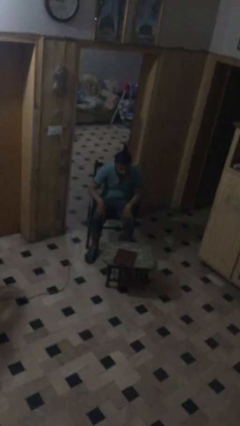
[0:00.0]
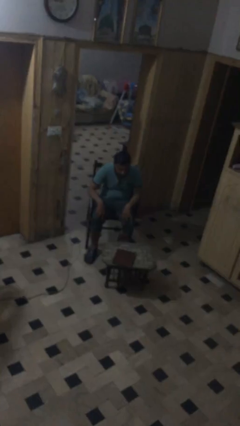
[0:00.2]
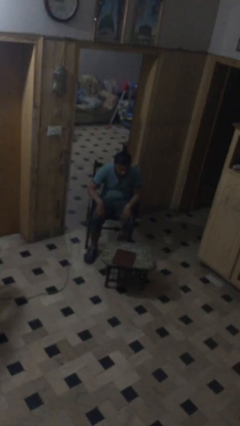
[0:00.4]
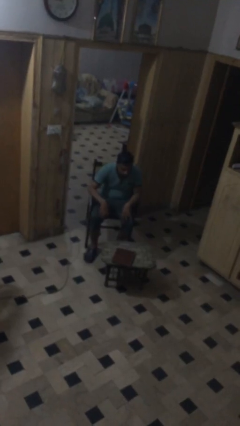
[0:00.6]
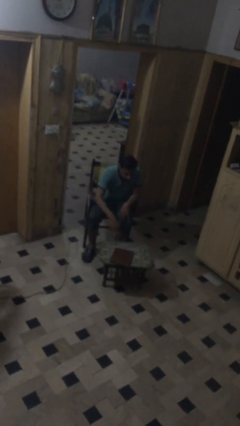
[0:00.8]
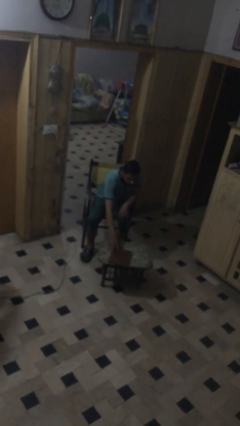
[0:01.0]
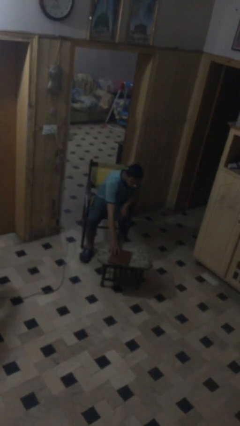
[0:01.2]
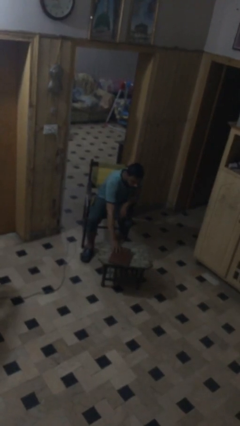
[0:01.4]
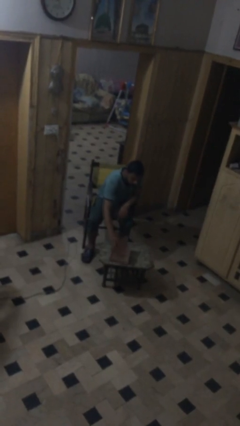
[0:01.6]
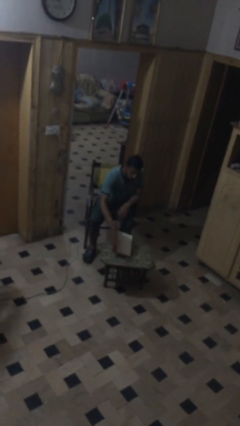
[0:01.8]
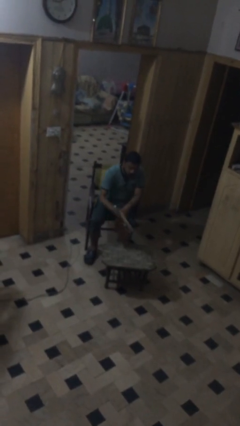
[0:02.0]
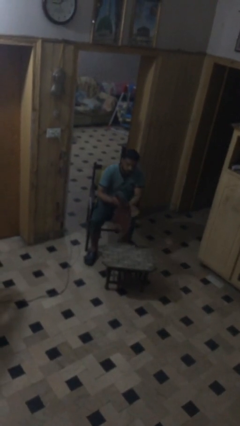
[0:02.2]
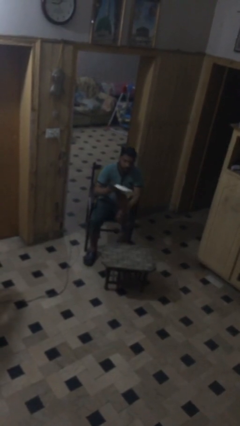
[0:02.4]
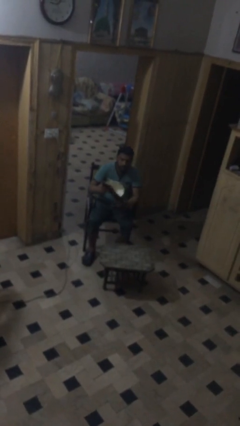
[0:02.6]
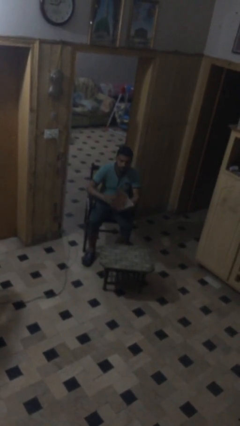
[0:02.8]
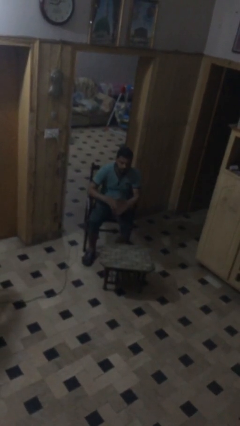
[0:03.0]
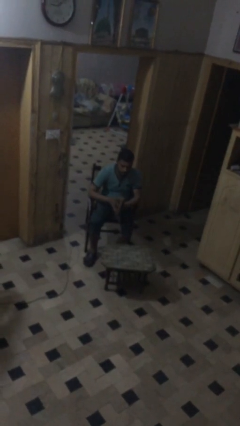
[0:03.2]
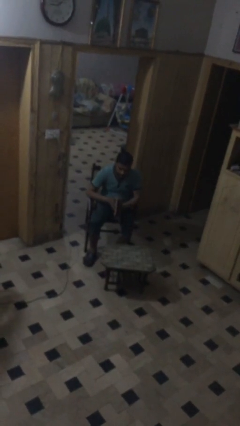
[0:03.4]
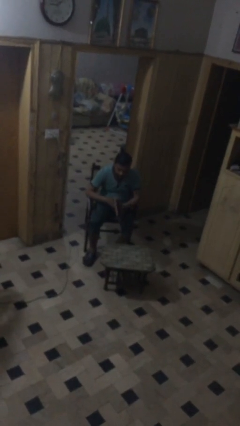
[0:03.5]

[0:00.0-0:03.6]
person picks up object from table

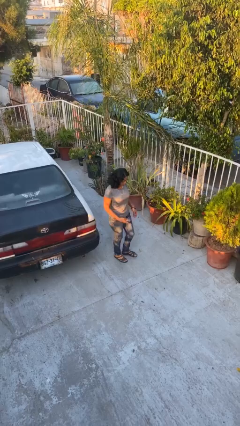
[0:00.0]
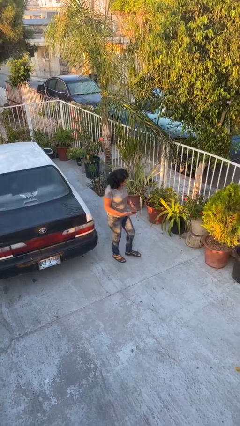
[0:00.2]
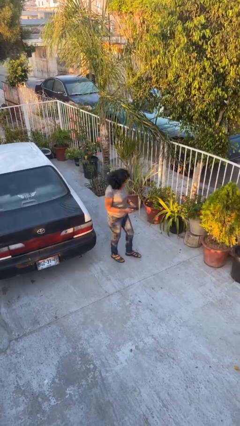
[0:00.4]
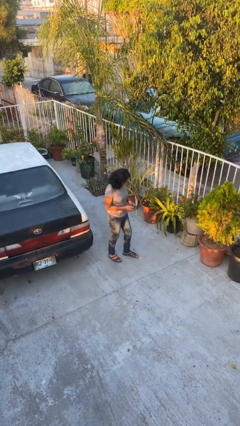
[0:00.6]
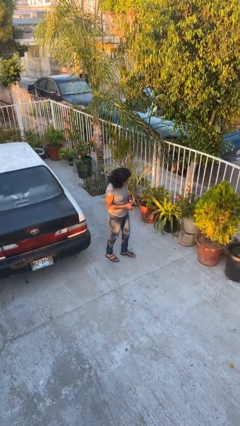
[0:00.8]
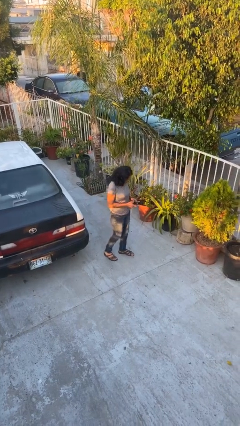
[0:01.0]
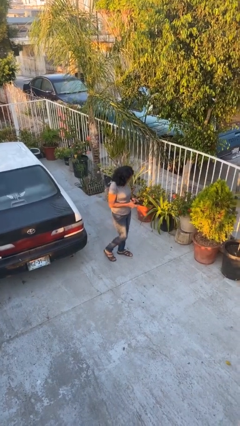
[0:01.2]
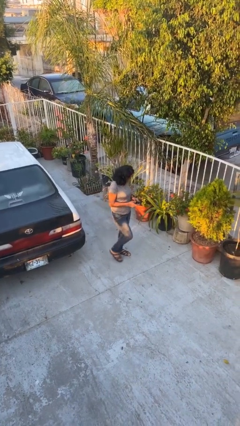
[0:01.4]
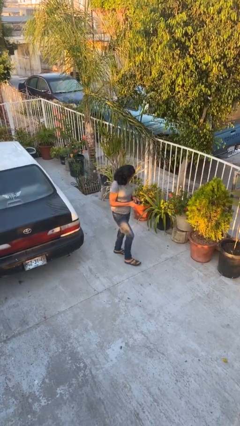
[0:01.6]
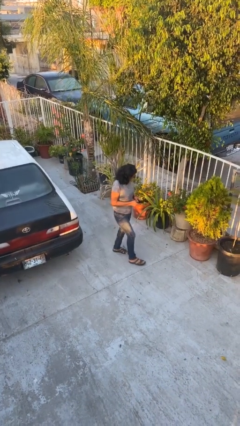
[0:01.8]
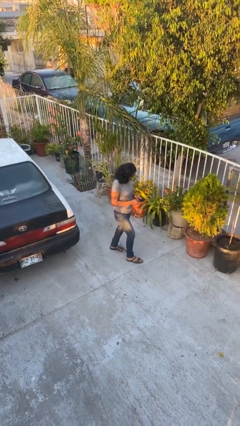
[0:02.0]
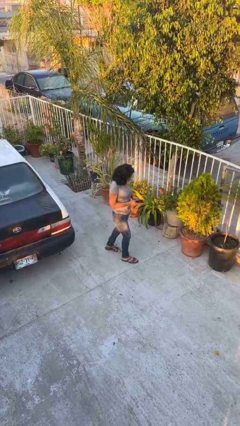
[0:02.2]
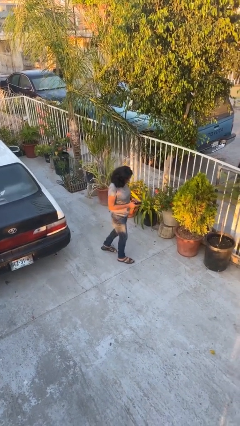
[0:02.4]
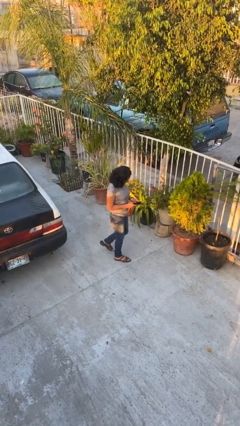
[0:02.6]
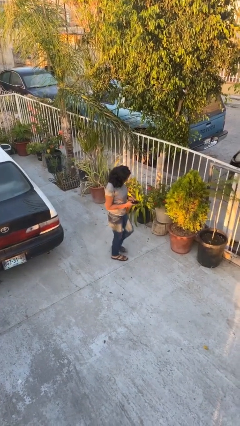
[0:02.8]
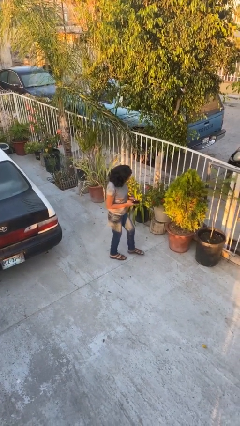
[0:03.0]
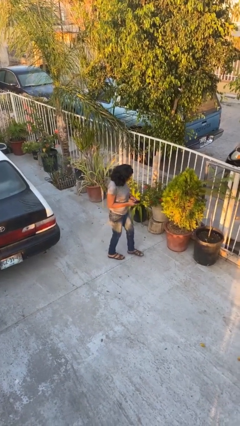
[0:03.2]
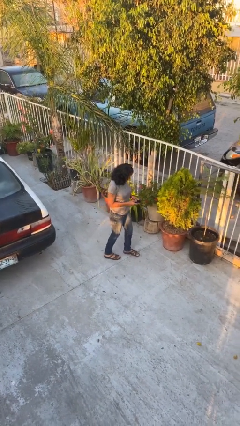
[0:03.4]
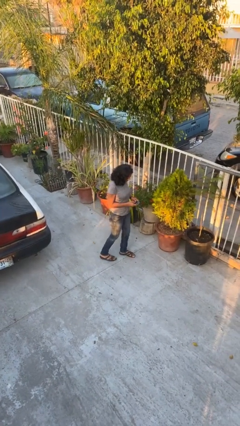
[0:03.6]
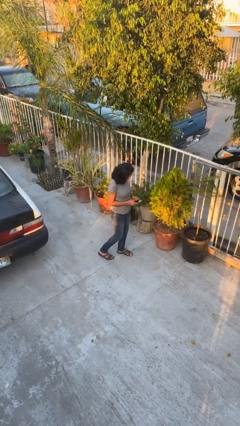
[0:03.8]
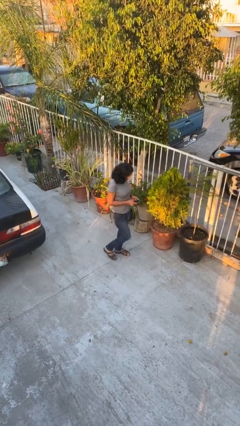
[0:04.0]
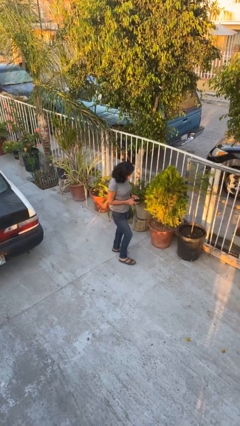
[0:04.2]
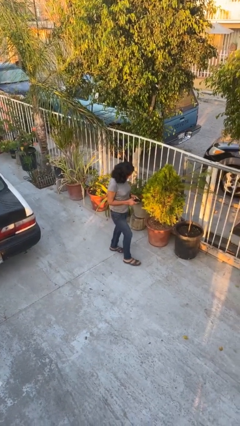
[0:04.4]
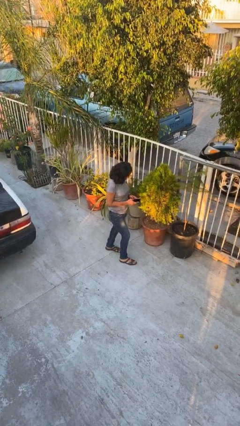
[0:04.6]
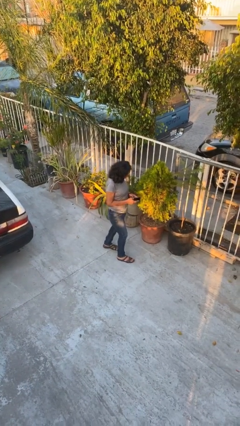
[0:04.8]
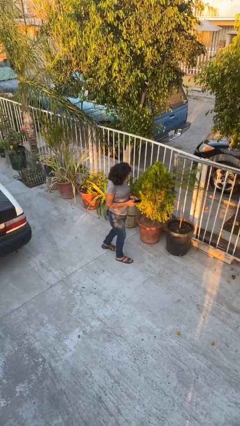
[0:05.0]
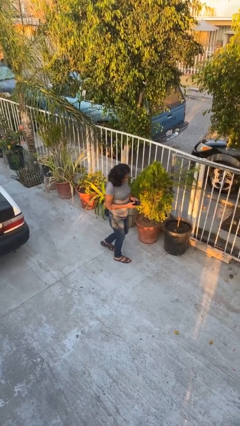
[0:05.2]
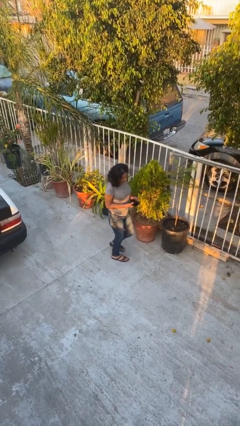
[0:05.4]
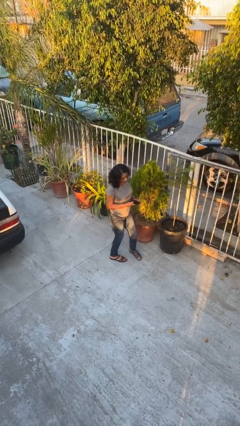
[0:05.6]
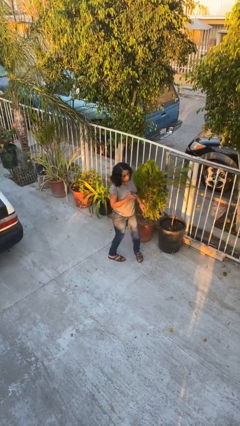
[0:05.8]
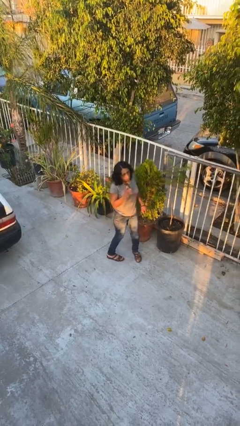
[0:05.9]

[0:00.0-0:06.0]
person texts on phone

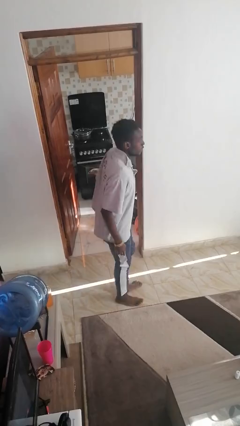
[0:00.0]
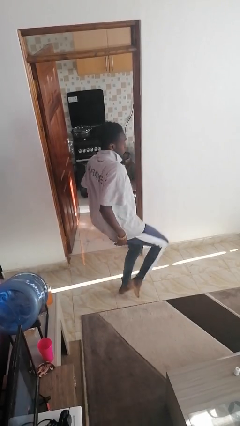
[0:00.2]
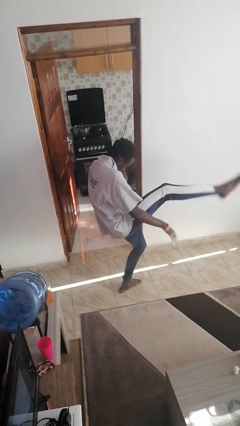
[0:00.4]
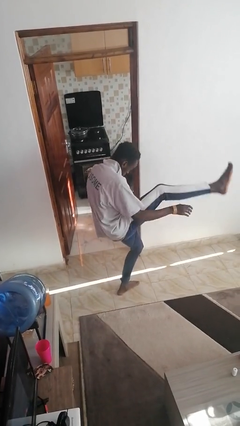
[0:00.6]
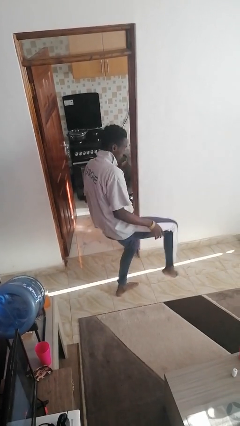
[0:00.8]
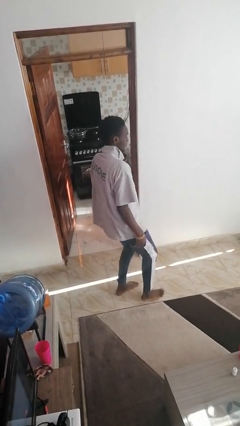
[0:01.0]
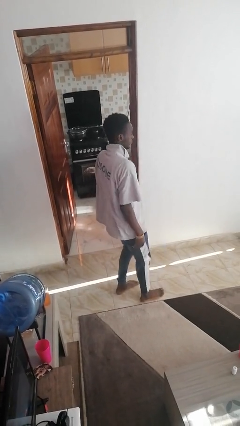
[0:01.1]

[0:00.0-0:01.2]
person karate kicks

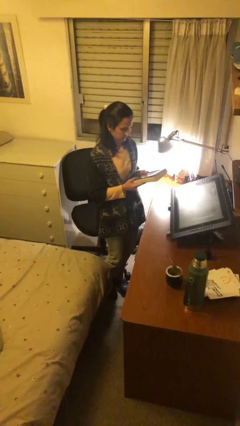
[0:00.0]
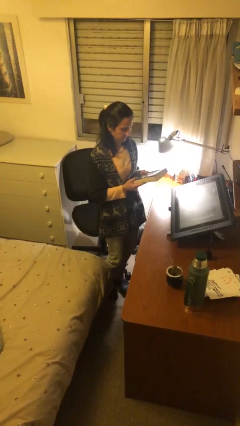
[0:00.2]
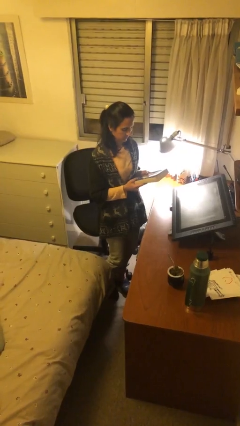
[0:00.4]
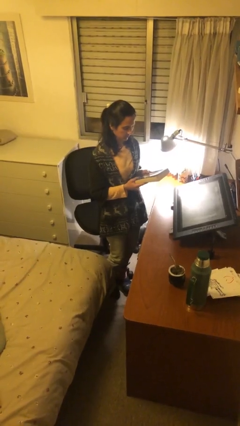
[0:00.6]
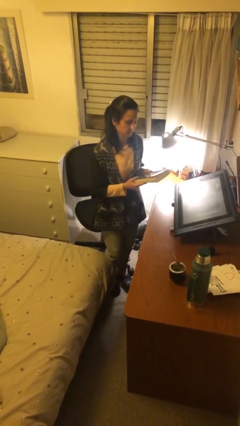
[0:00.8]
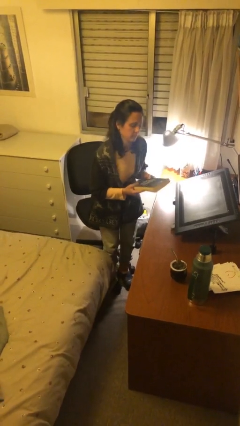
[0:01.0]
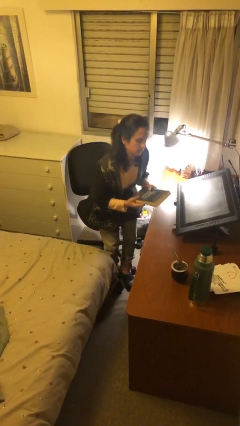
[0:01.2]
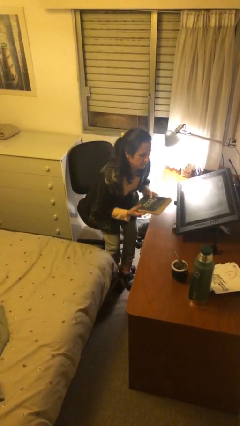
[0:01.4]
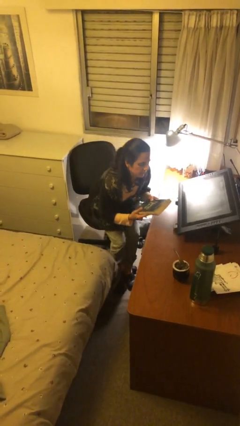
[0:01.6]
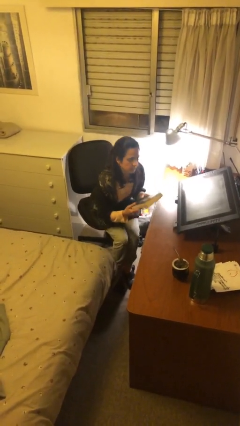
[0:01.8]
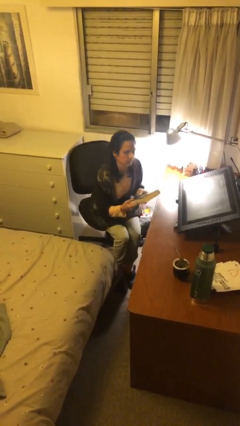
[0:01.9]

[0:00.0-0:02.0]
person sits down

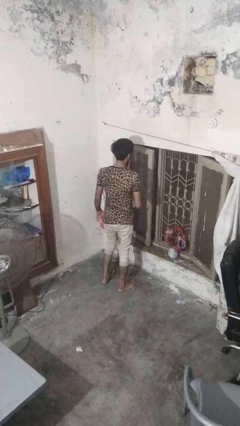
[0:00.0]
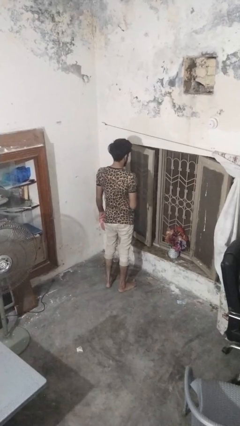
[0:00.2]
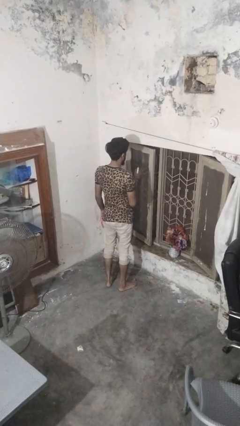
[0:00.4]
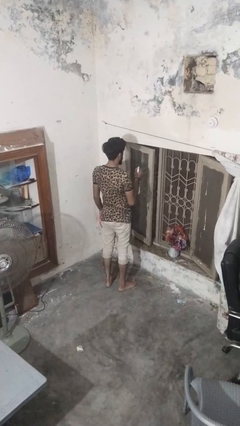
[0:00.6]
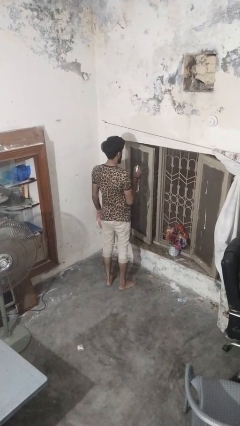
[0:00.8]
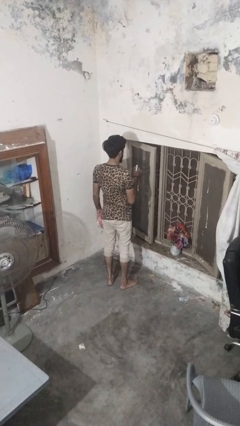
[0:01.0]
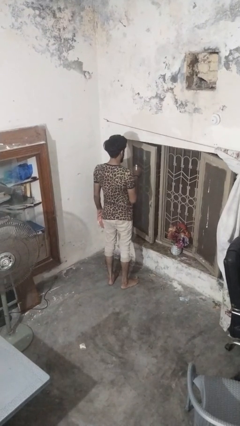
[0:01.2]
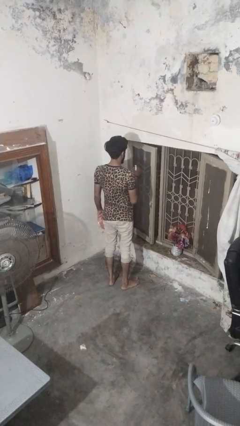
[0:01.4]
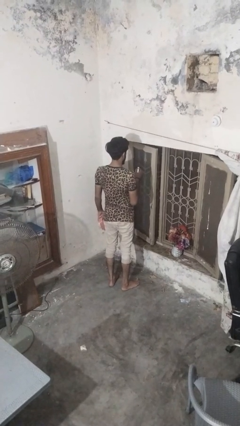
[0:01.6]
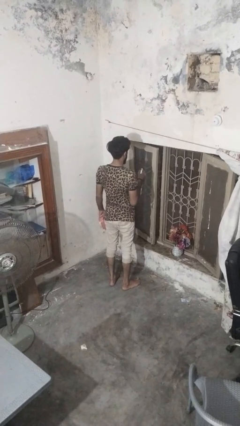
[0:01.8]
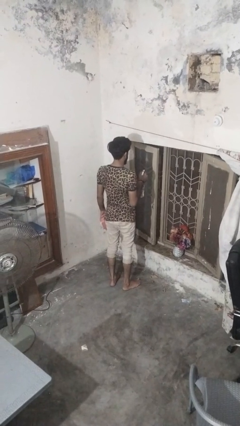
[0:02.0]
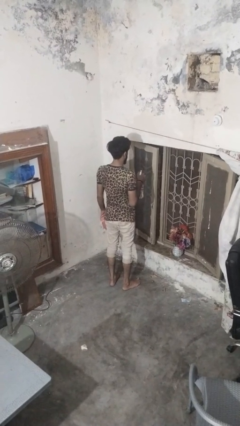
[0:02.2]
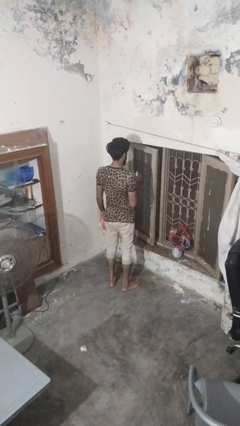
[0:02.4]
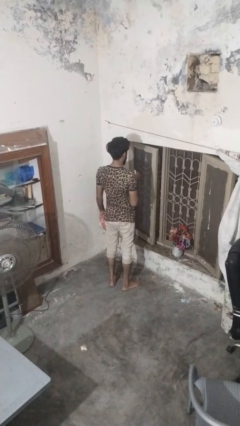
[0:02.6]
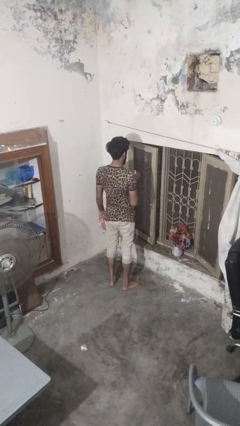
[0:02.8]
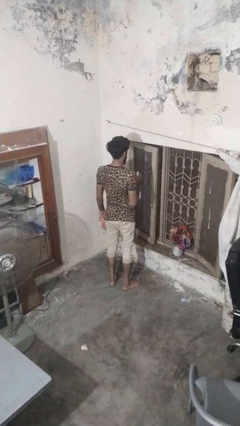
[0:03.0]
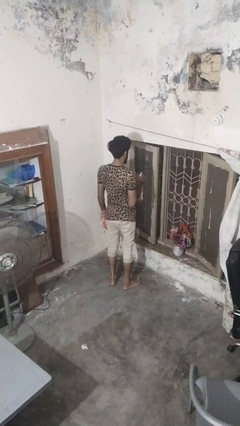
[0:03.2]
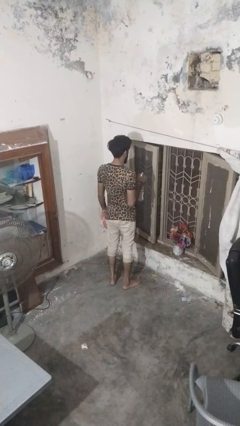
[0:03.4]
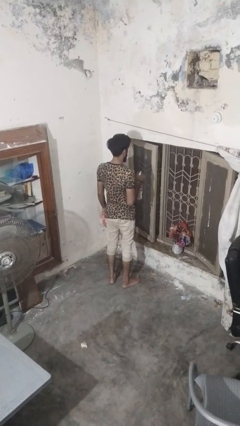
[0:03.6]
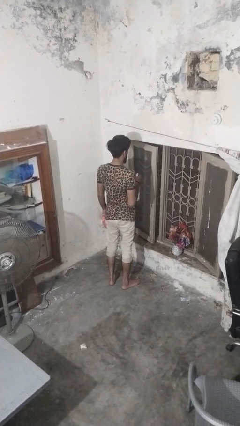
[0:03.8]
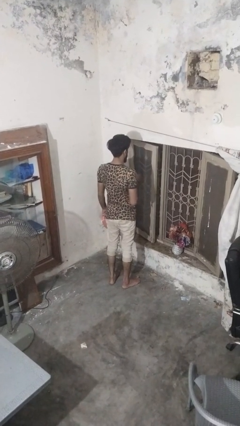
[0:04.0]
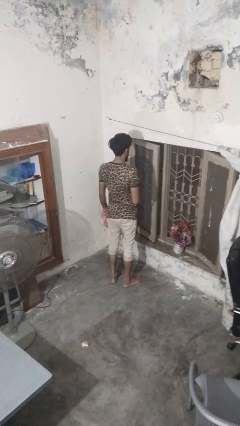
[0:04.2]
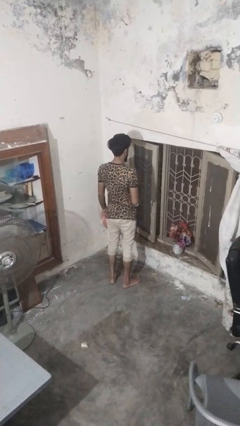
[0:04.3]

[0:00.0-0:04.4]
person sprays from bottle
